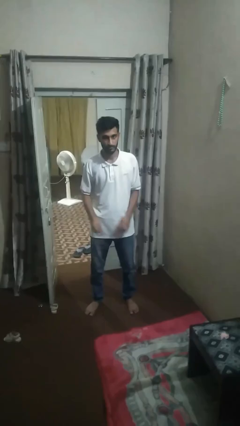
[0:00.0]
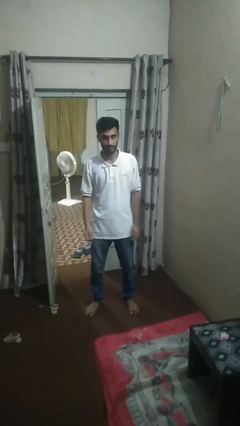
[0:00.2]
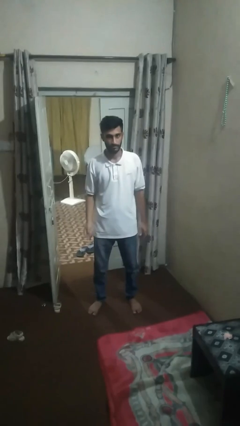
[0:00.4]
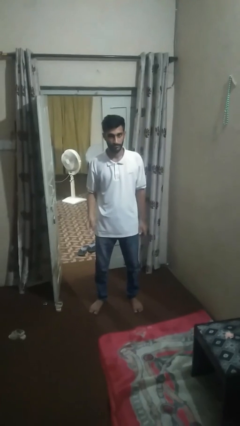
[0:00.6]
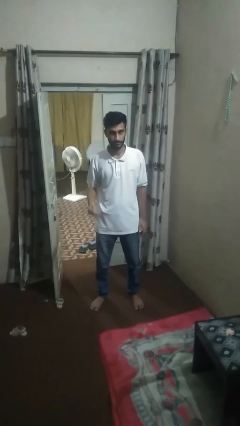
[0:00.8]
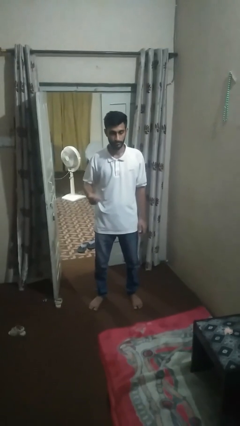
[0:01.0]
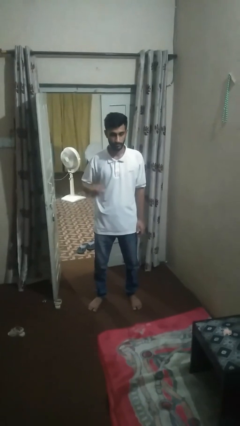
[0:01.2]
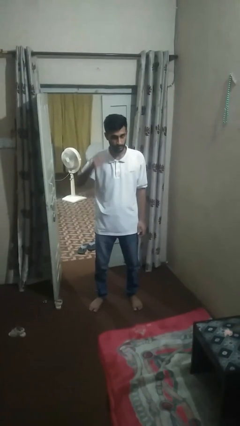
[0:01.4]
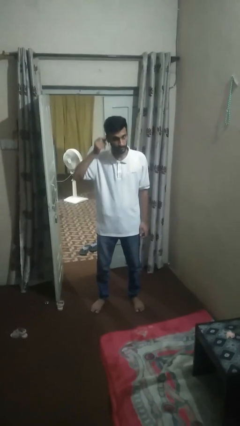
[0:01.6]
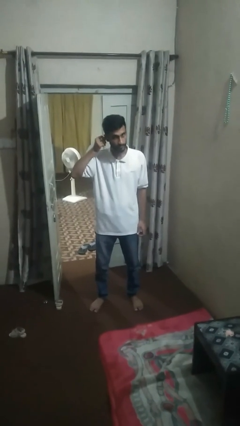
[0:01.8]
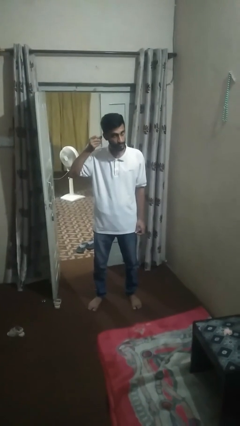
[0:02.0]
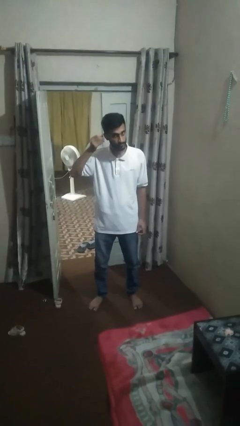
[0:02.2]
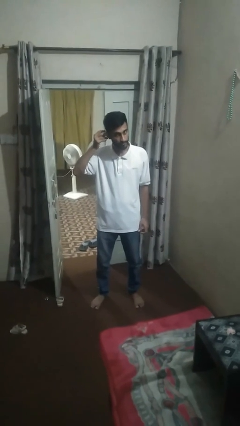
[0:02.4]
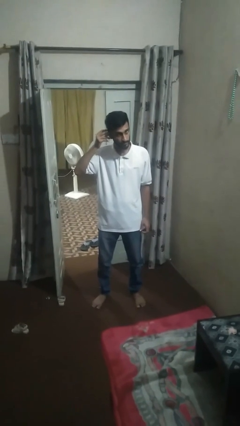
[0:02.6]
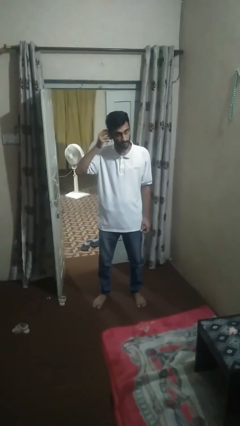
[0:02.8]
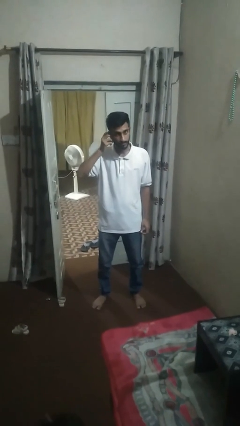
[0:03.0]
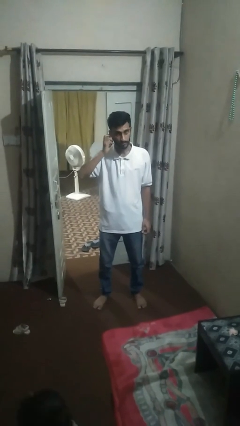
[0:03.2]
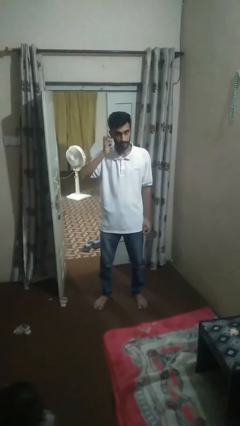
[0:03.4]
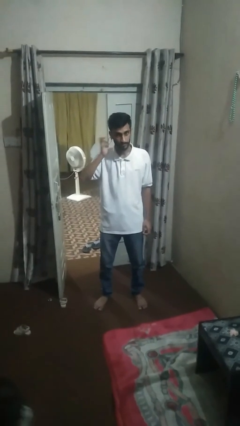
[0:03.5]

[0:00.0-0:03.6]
person puts on earrings

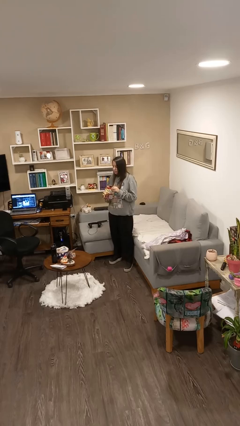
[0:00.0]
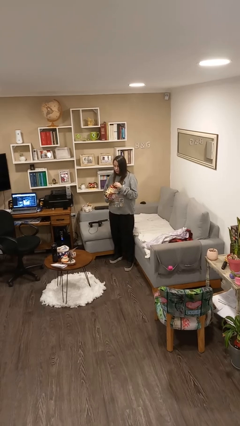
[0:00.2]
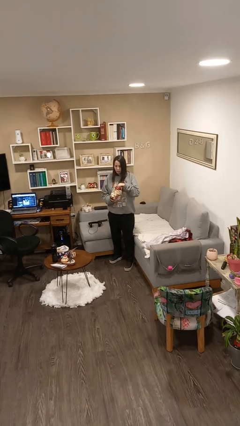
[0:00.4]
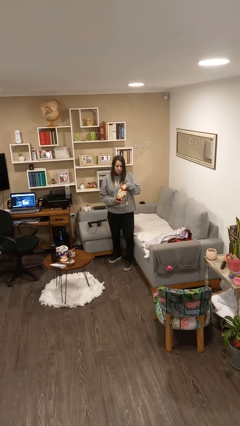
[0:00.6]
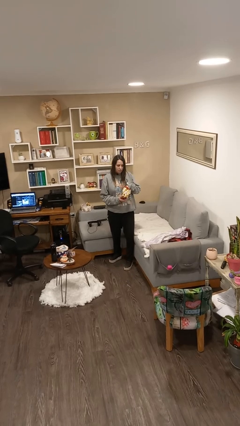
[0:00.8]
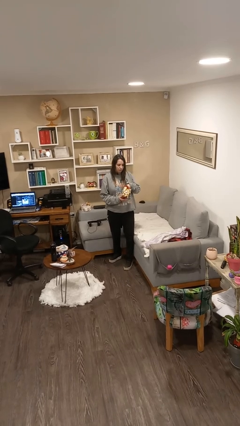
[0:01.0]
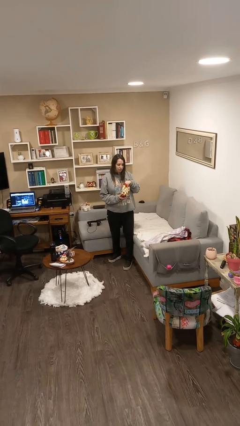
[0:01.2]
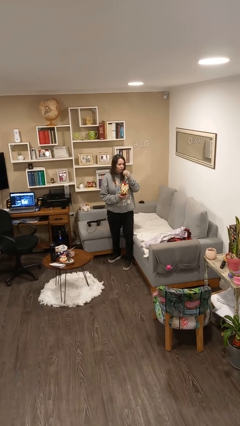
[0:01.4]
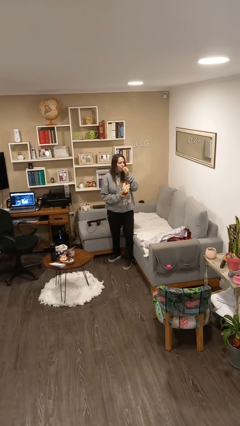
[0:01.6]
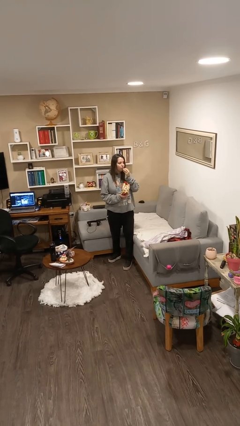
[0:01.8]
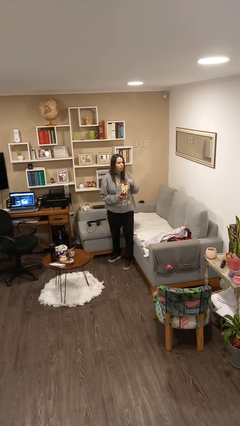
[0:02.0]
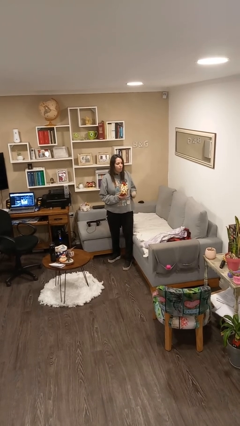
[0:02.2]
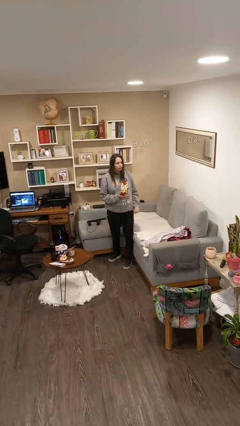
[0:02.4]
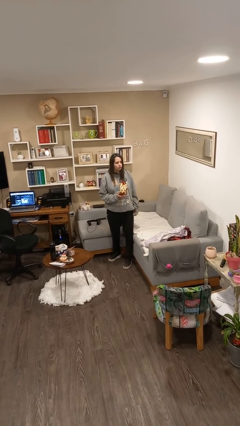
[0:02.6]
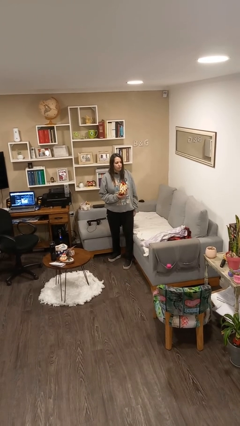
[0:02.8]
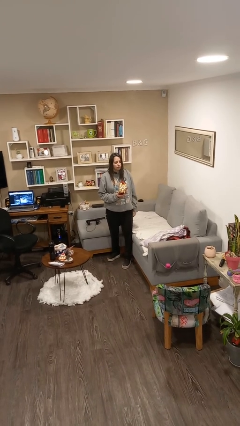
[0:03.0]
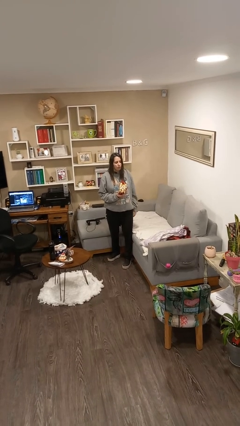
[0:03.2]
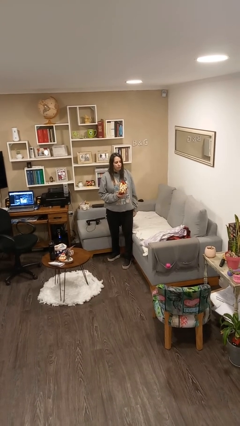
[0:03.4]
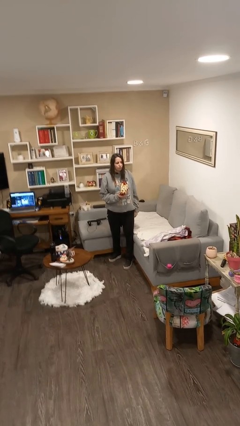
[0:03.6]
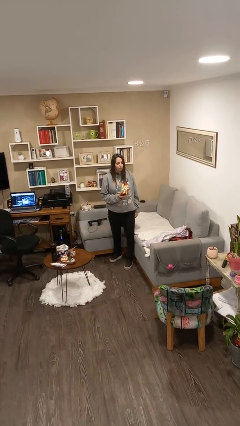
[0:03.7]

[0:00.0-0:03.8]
person eats snack from bag

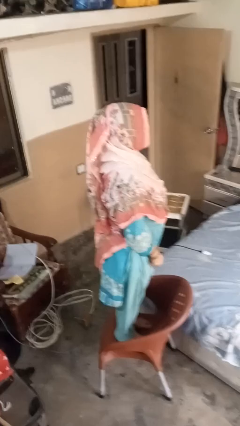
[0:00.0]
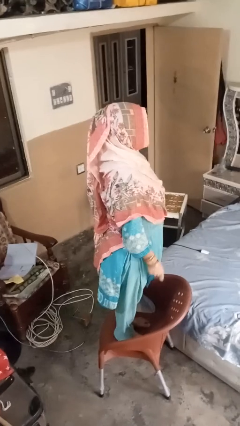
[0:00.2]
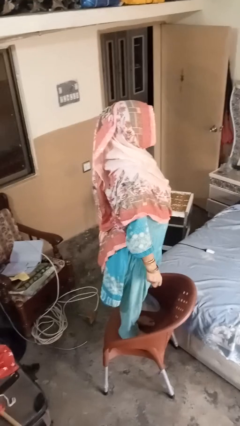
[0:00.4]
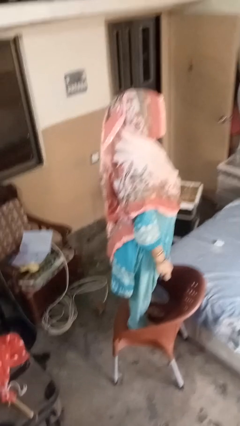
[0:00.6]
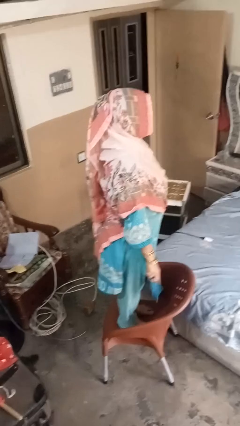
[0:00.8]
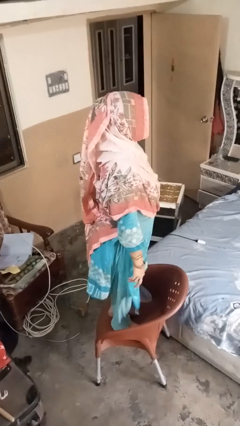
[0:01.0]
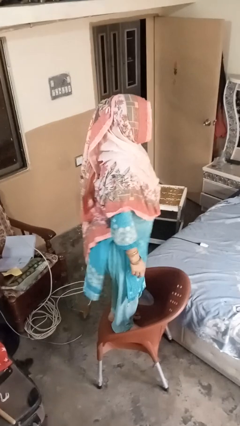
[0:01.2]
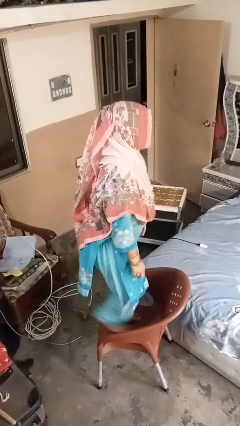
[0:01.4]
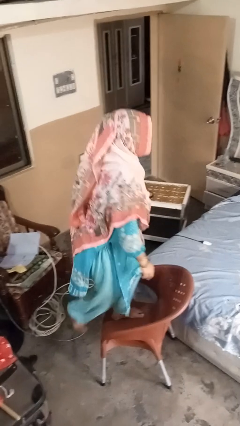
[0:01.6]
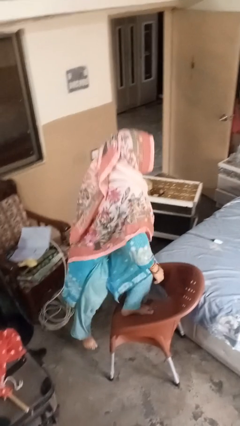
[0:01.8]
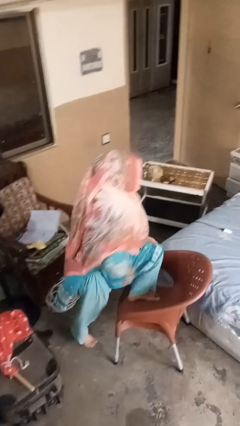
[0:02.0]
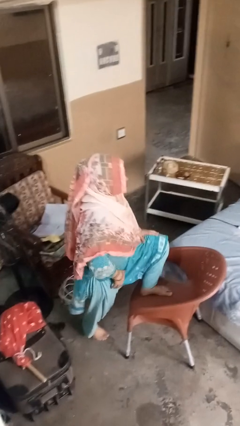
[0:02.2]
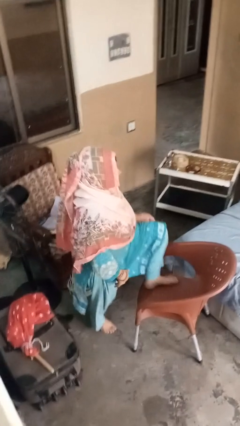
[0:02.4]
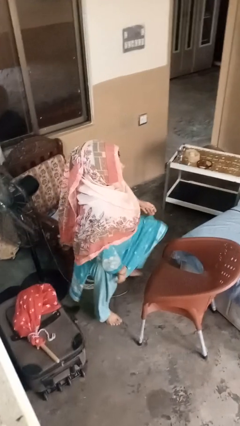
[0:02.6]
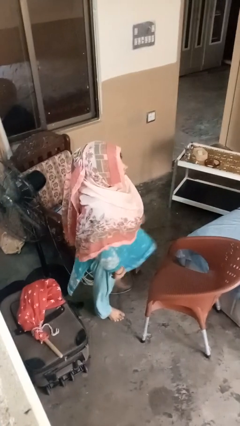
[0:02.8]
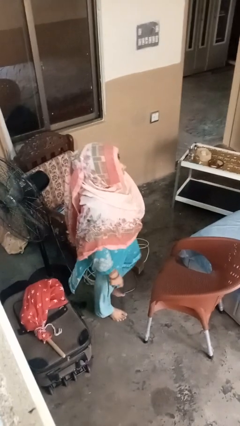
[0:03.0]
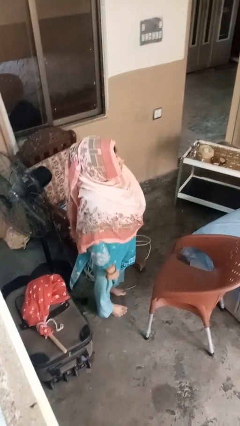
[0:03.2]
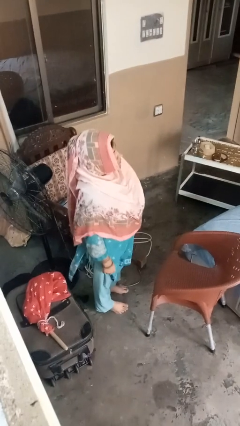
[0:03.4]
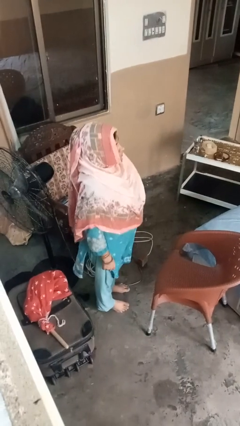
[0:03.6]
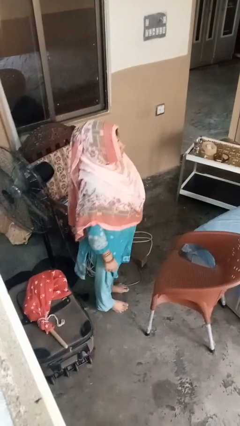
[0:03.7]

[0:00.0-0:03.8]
person climbs off chair

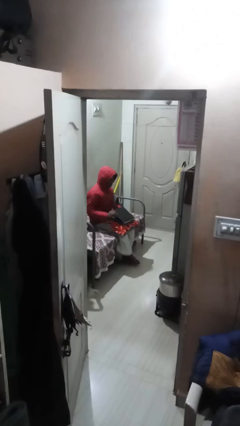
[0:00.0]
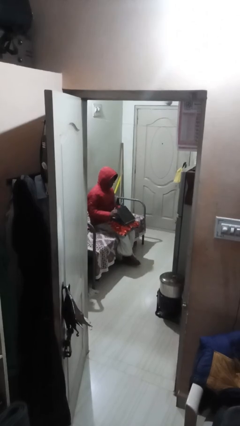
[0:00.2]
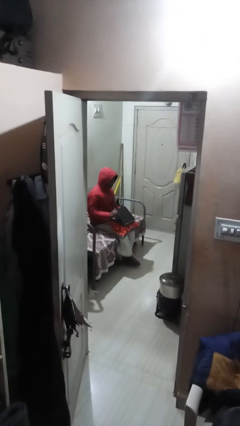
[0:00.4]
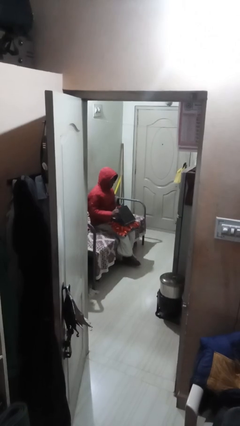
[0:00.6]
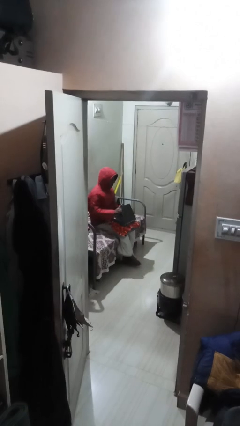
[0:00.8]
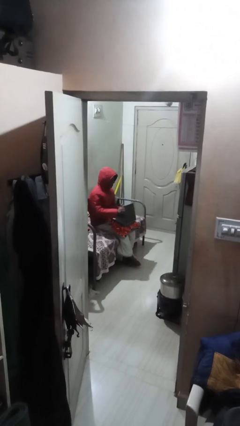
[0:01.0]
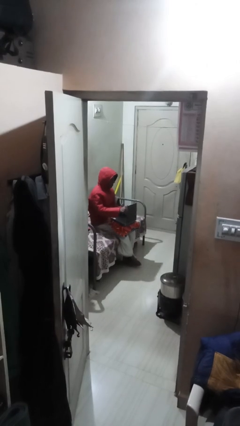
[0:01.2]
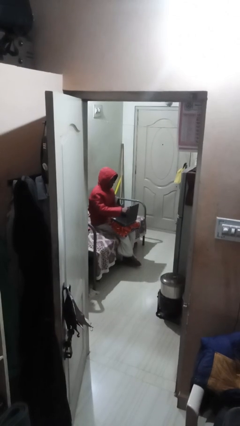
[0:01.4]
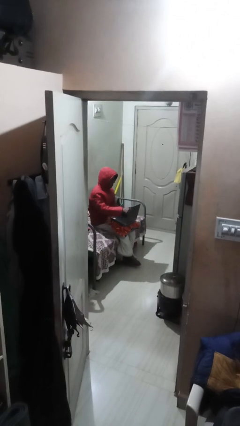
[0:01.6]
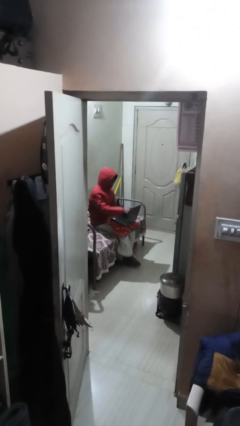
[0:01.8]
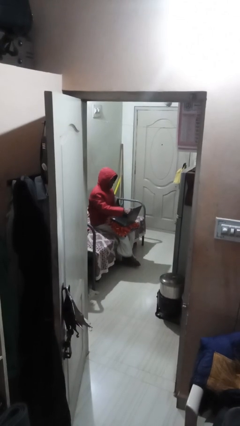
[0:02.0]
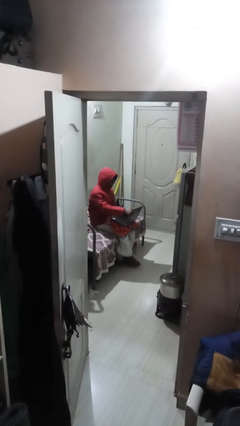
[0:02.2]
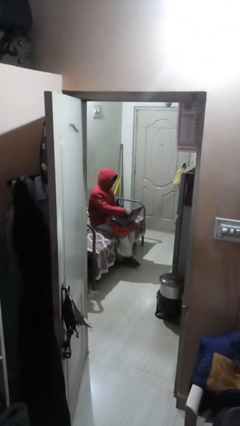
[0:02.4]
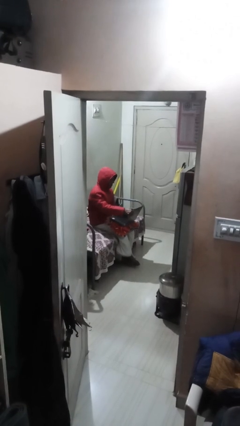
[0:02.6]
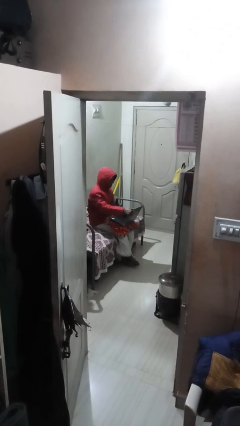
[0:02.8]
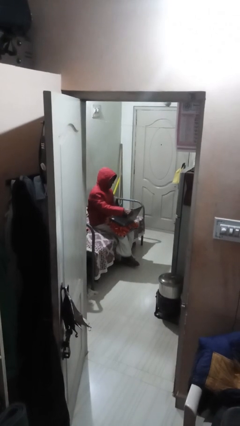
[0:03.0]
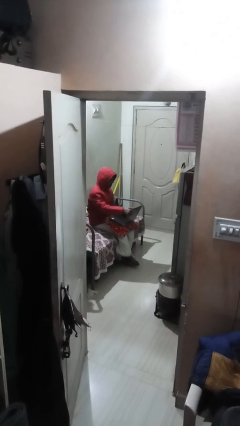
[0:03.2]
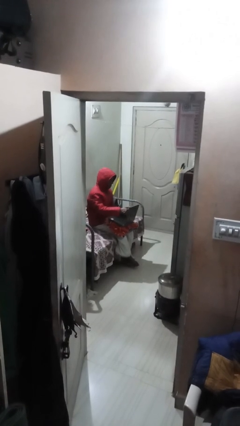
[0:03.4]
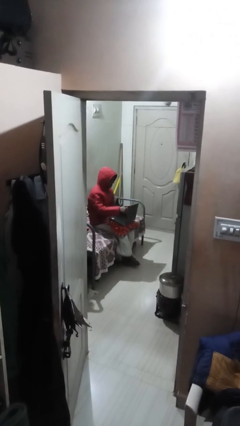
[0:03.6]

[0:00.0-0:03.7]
person interacts with laptop

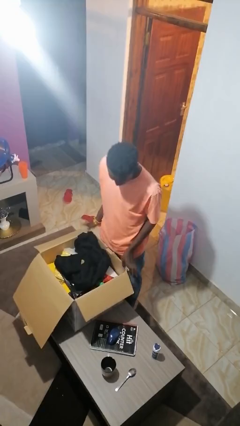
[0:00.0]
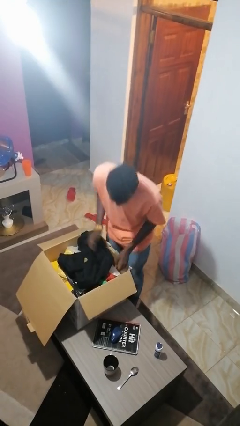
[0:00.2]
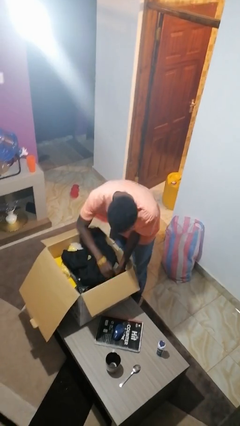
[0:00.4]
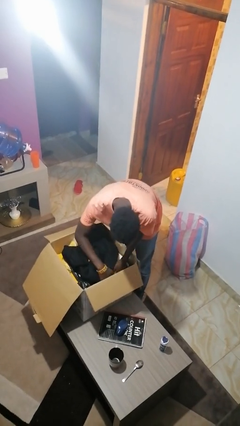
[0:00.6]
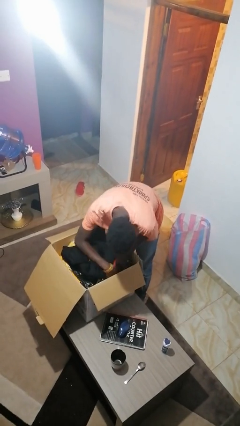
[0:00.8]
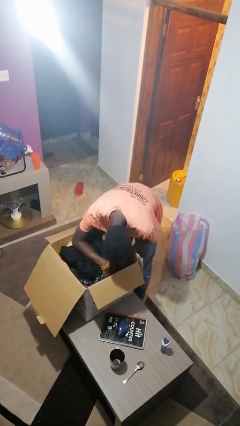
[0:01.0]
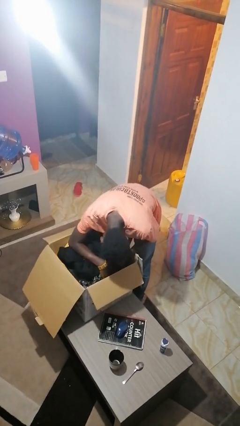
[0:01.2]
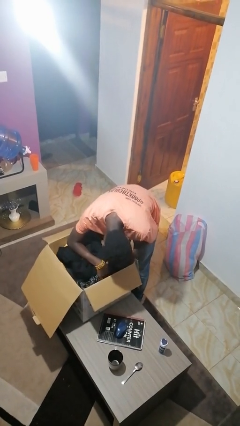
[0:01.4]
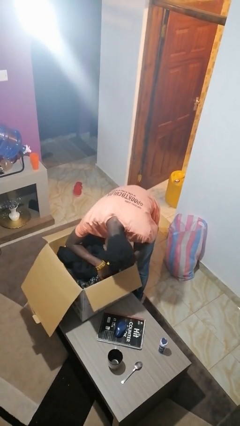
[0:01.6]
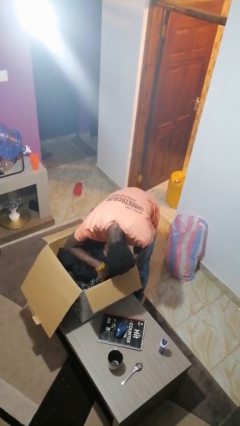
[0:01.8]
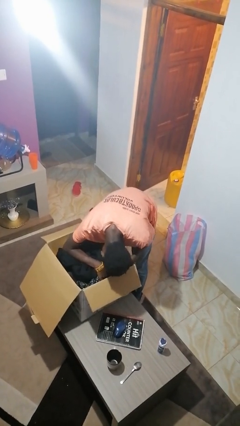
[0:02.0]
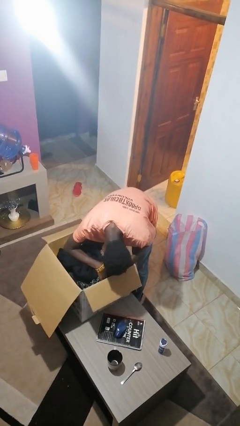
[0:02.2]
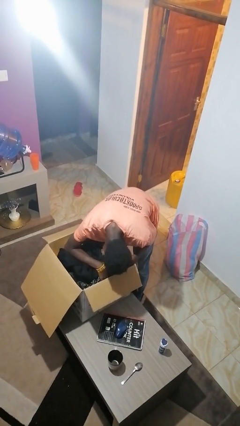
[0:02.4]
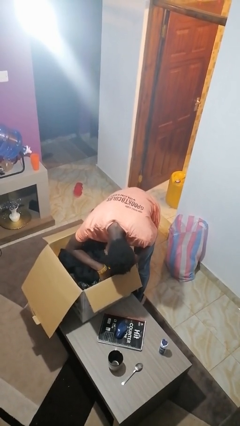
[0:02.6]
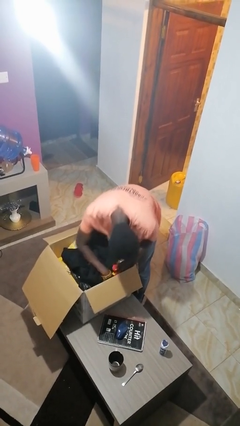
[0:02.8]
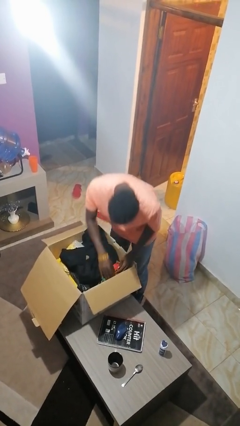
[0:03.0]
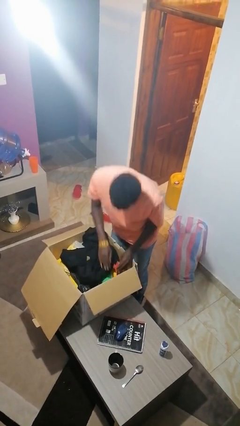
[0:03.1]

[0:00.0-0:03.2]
person searches in box
